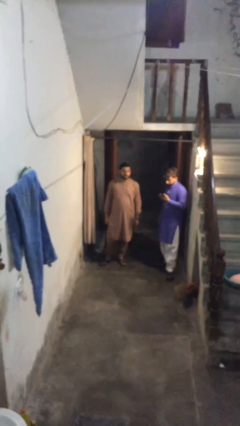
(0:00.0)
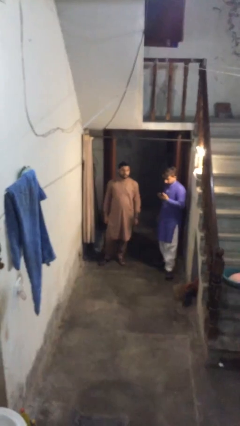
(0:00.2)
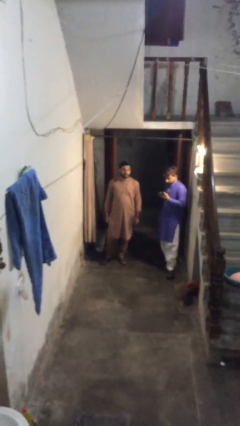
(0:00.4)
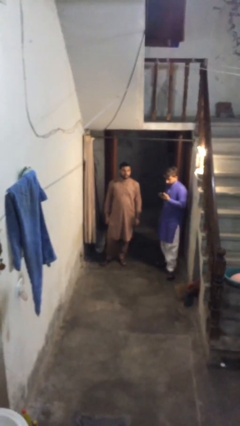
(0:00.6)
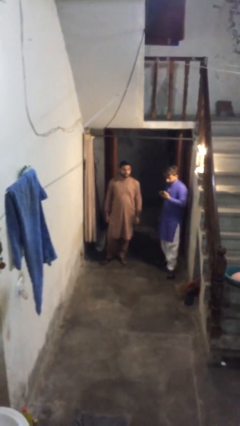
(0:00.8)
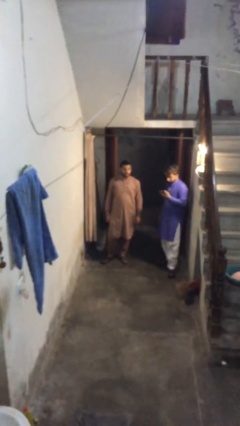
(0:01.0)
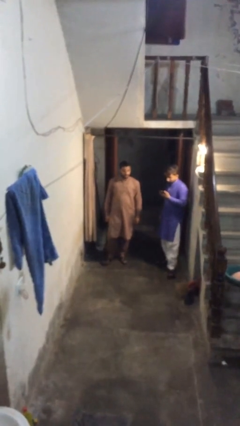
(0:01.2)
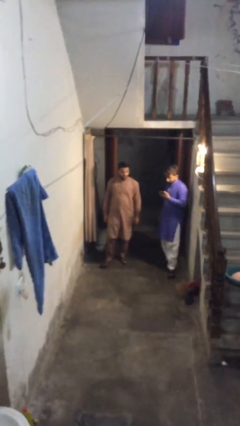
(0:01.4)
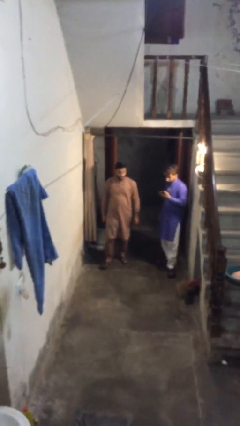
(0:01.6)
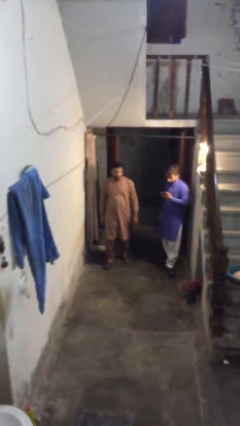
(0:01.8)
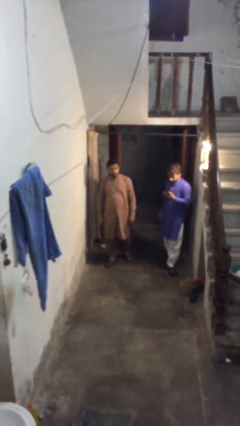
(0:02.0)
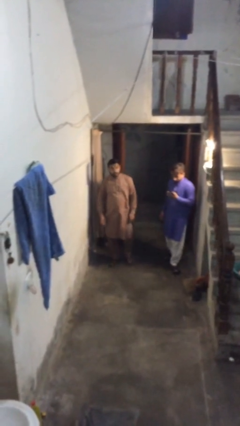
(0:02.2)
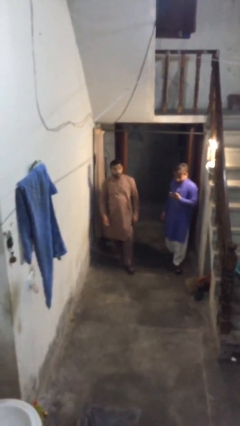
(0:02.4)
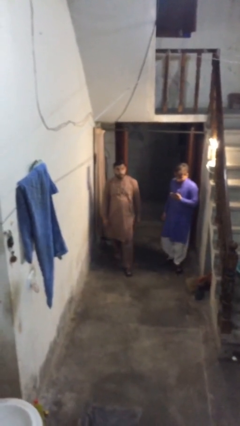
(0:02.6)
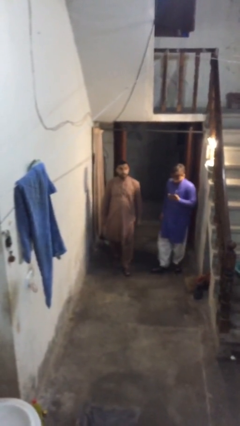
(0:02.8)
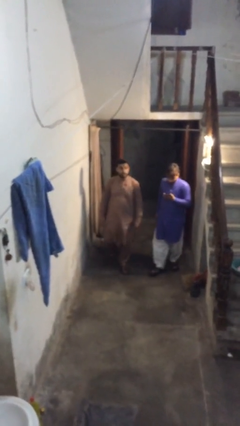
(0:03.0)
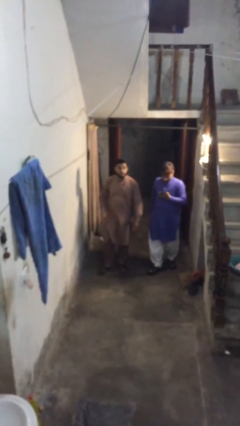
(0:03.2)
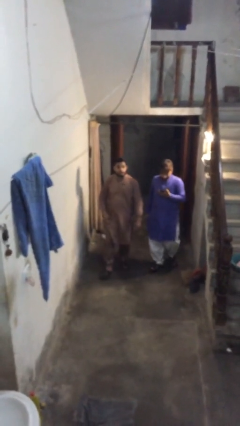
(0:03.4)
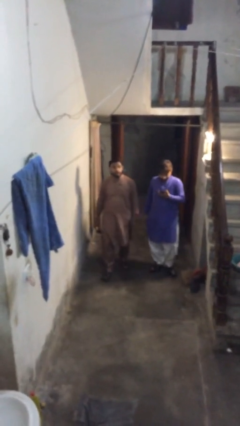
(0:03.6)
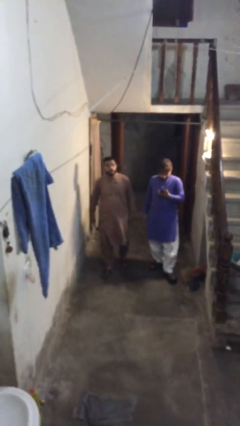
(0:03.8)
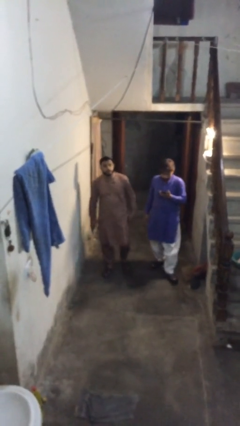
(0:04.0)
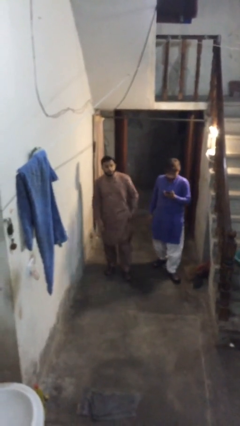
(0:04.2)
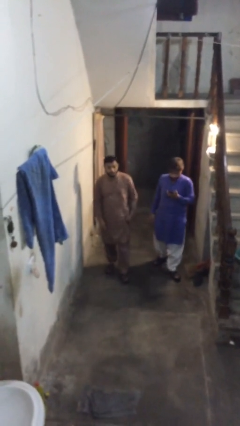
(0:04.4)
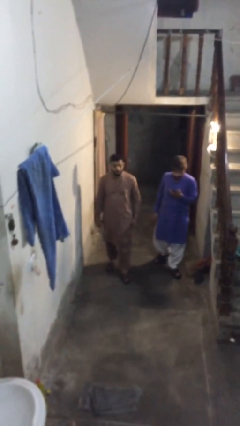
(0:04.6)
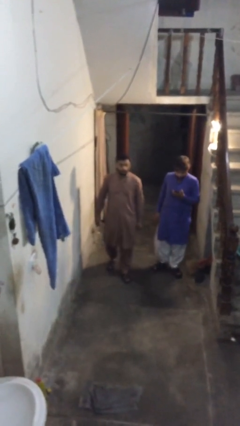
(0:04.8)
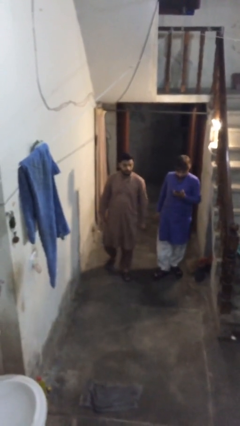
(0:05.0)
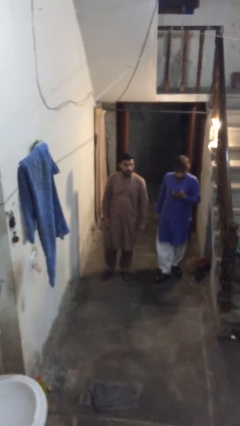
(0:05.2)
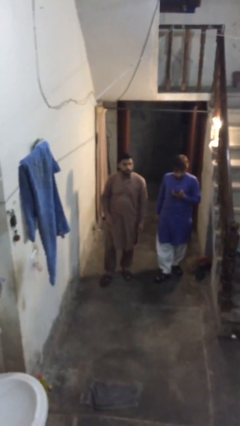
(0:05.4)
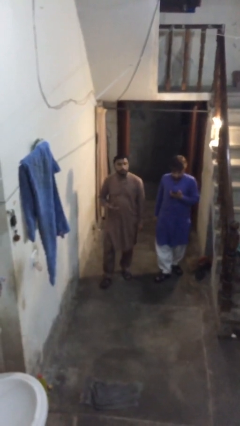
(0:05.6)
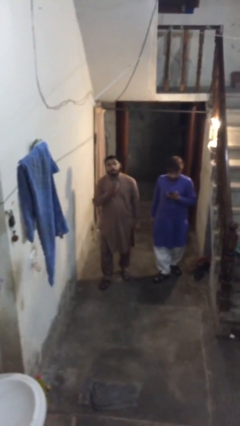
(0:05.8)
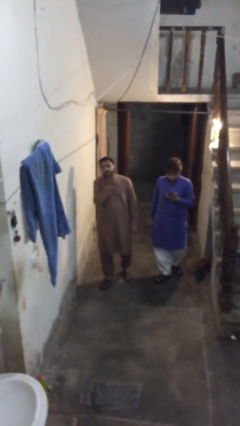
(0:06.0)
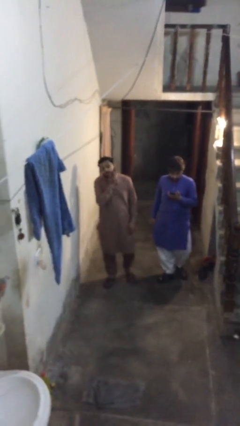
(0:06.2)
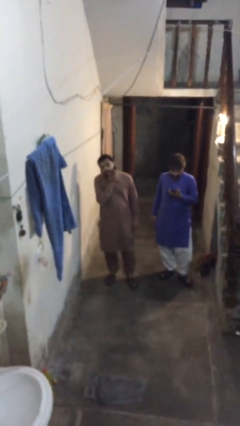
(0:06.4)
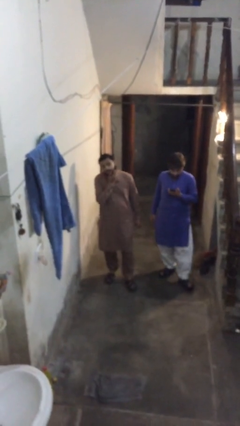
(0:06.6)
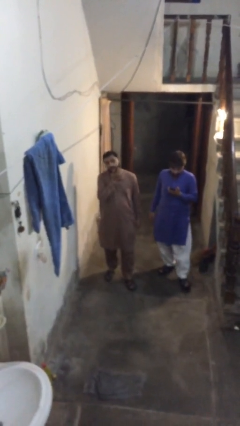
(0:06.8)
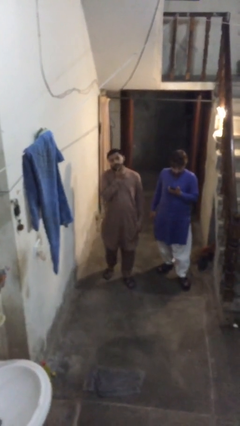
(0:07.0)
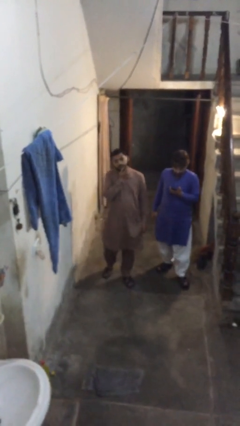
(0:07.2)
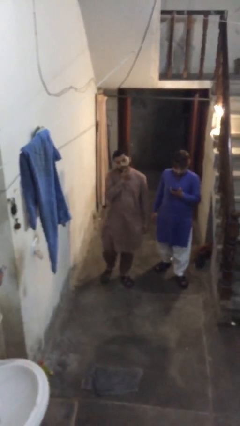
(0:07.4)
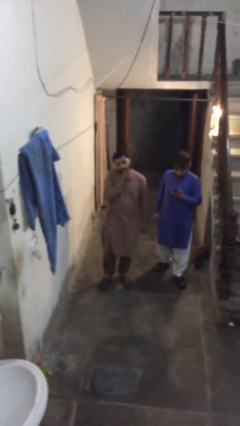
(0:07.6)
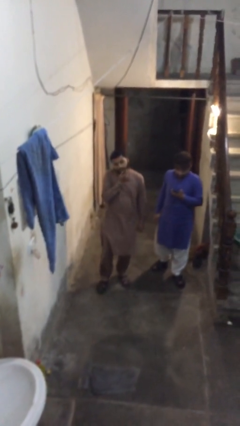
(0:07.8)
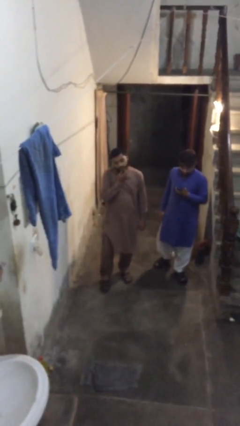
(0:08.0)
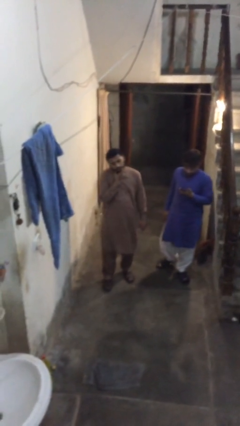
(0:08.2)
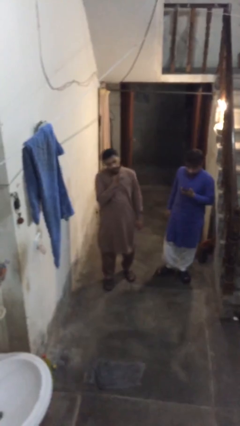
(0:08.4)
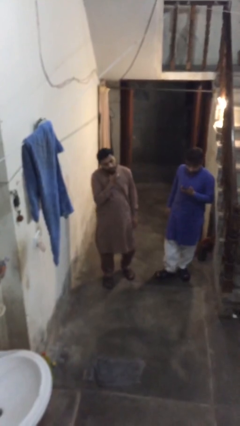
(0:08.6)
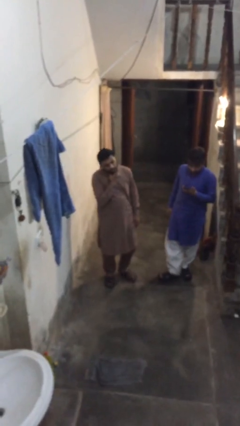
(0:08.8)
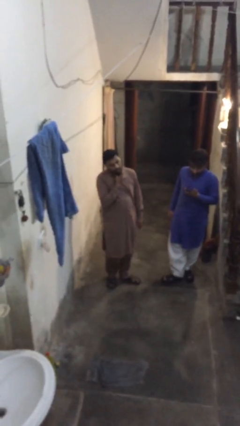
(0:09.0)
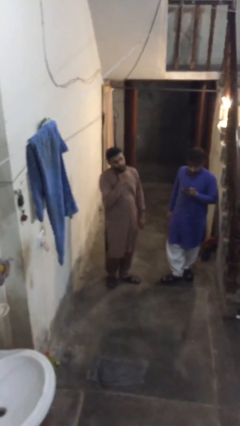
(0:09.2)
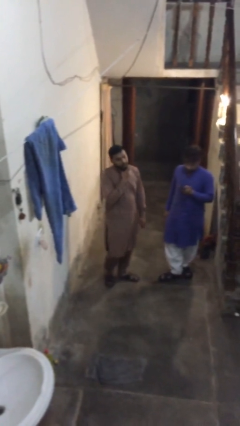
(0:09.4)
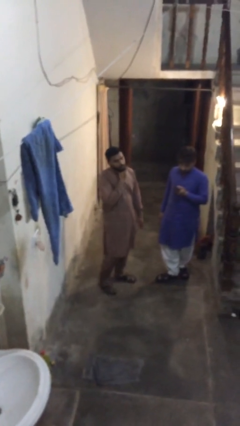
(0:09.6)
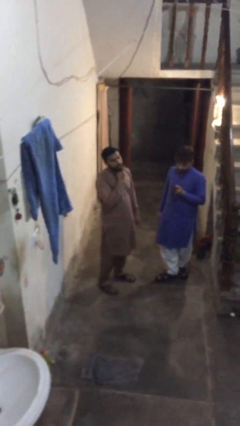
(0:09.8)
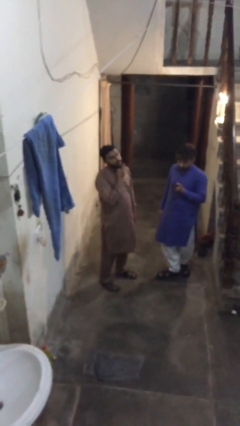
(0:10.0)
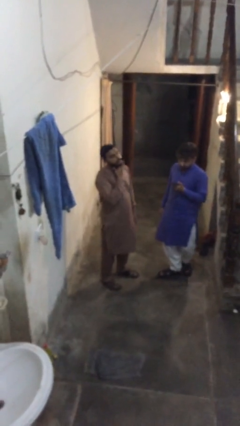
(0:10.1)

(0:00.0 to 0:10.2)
person talks to person

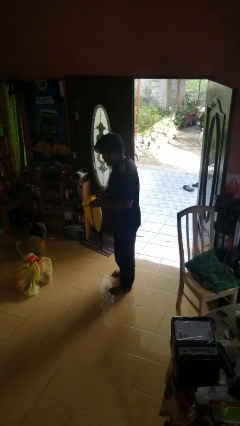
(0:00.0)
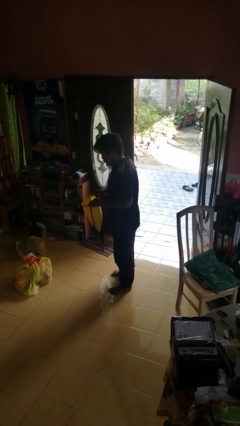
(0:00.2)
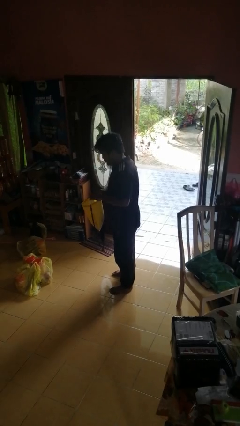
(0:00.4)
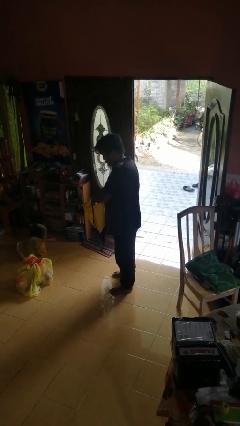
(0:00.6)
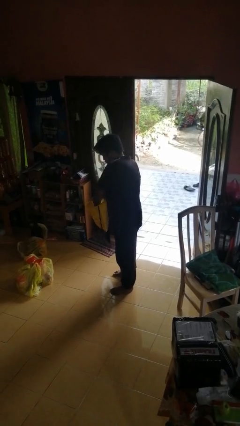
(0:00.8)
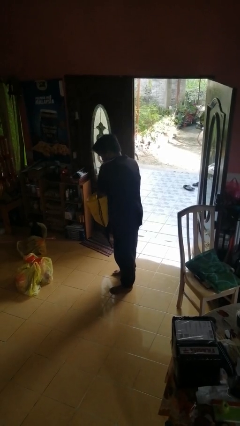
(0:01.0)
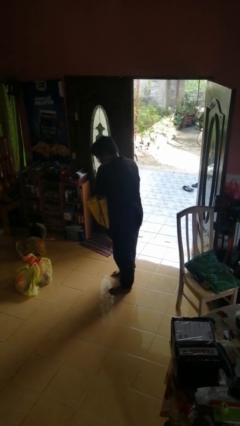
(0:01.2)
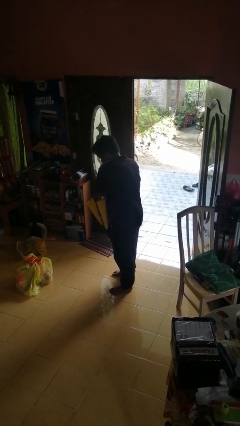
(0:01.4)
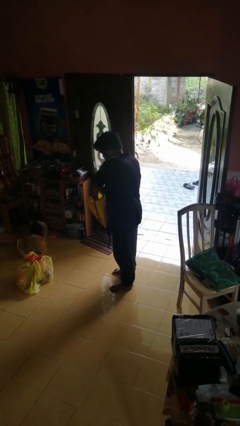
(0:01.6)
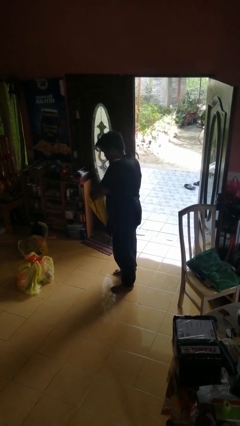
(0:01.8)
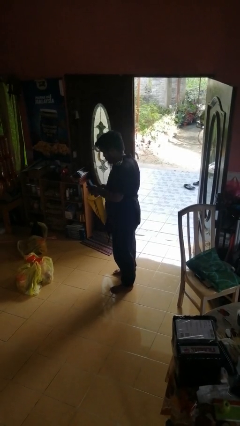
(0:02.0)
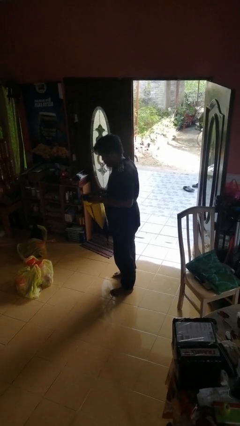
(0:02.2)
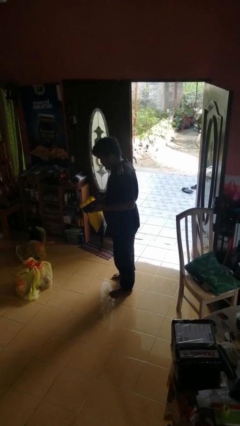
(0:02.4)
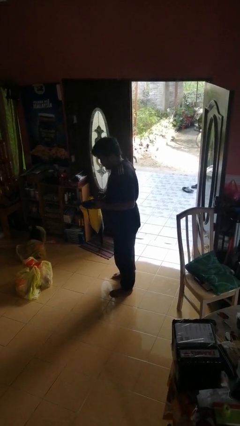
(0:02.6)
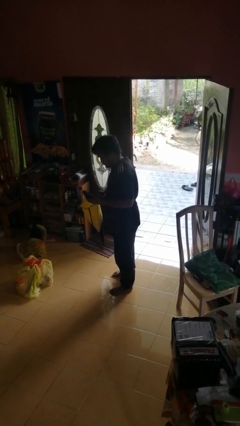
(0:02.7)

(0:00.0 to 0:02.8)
person takes object from bag

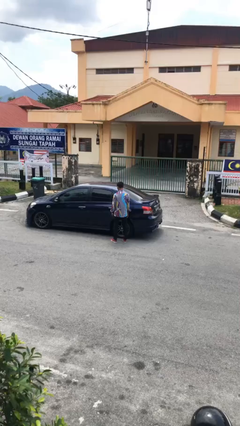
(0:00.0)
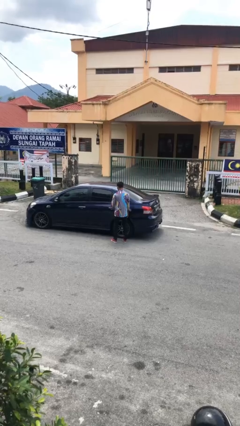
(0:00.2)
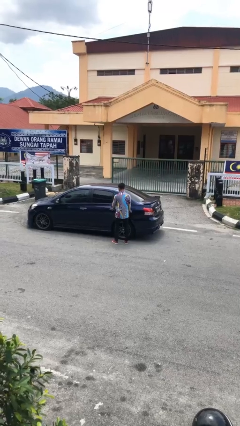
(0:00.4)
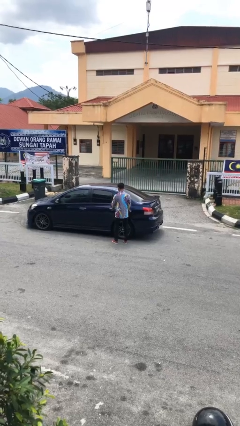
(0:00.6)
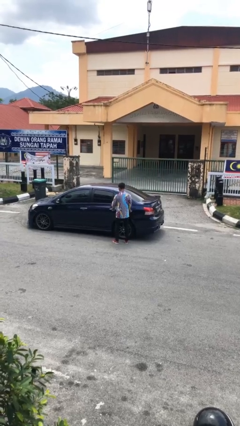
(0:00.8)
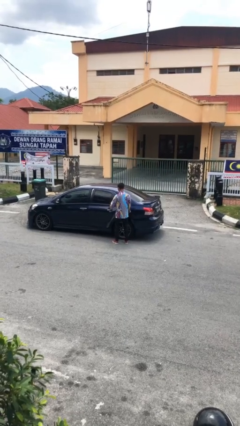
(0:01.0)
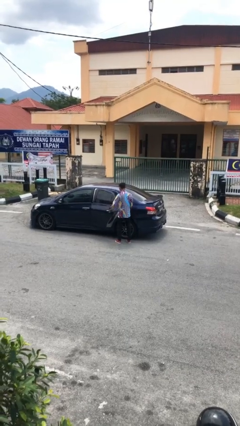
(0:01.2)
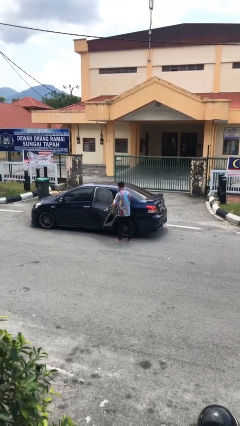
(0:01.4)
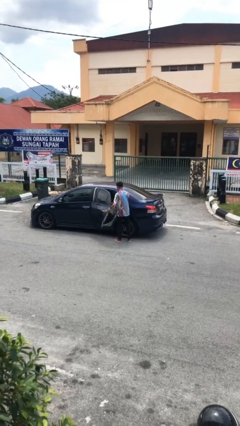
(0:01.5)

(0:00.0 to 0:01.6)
person opens car door

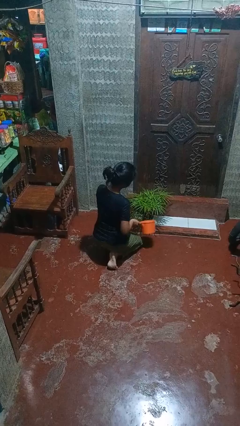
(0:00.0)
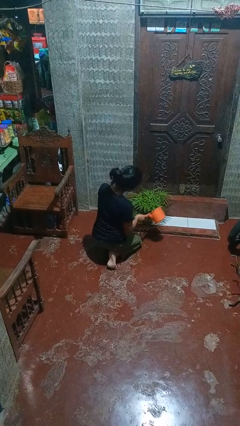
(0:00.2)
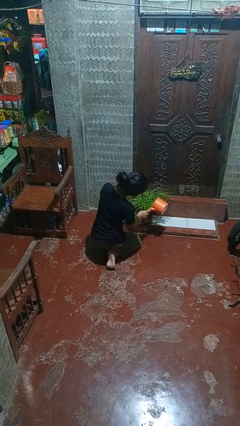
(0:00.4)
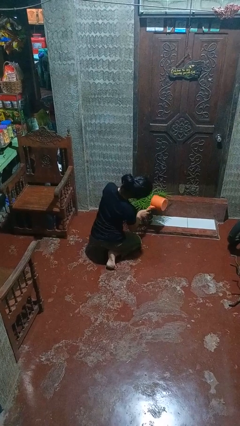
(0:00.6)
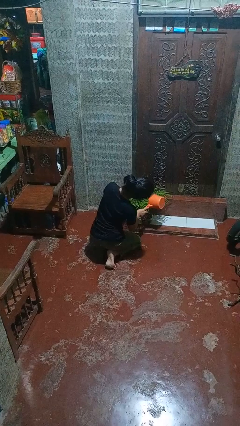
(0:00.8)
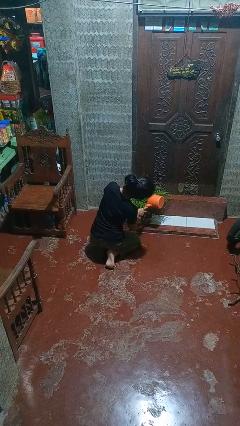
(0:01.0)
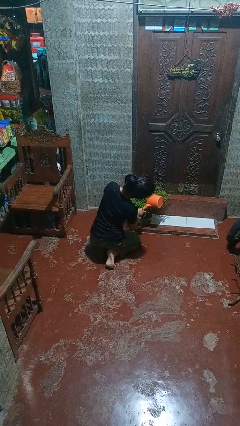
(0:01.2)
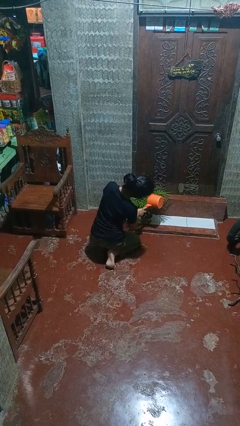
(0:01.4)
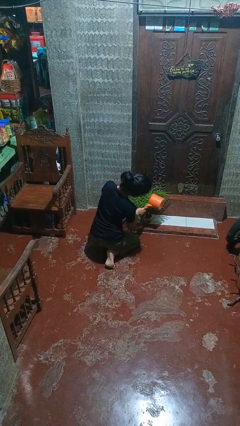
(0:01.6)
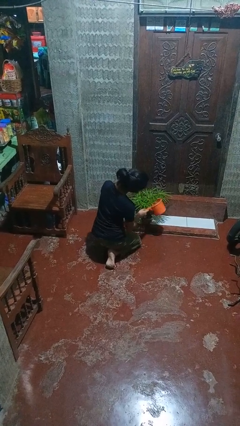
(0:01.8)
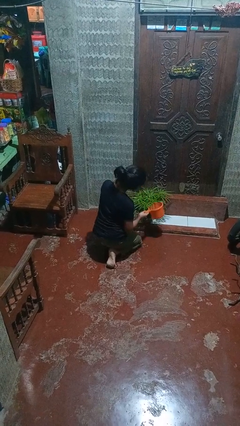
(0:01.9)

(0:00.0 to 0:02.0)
person waters houseplant

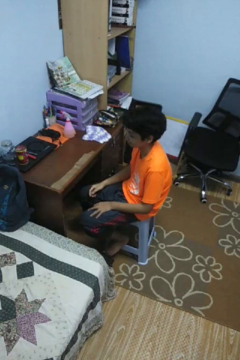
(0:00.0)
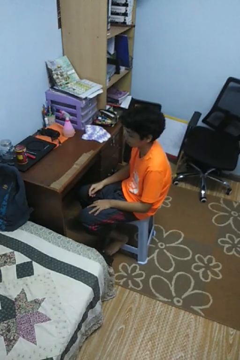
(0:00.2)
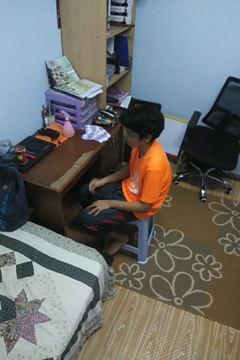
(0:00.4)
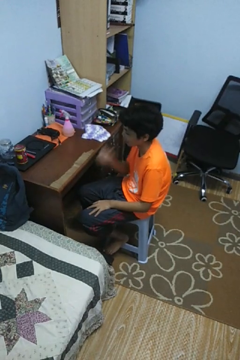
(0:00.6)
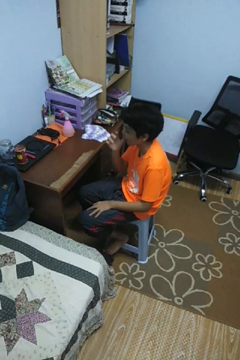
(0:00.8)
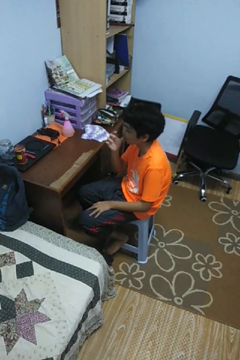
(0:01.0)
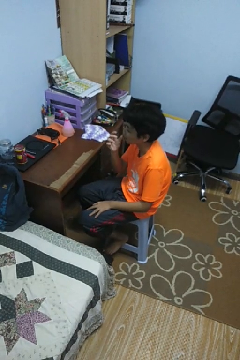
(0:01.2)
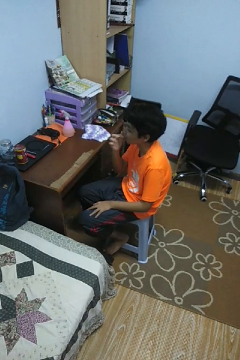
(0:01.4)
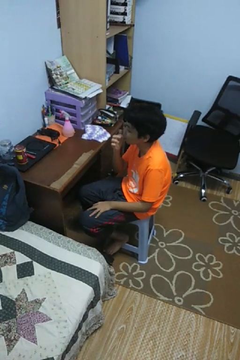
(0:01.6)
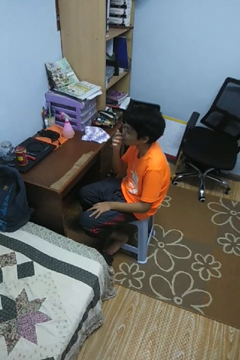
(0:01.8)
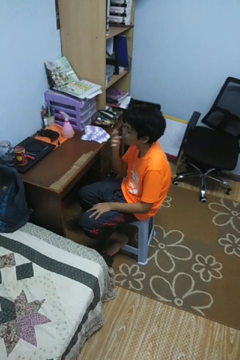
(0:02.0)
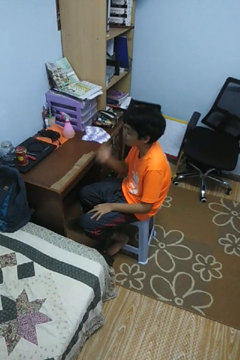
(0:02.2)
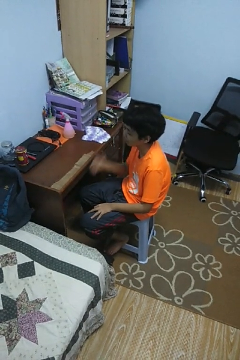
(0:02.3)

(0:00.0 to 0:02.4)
person licks fingers
